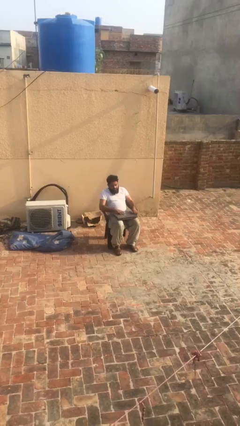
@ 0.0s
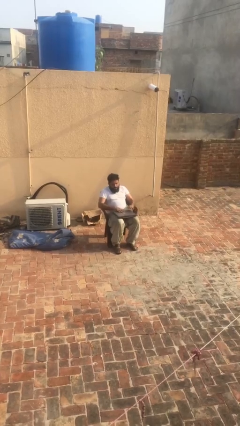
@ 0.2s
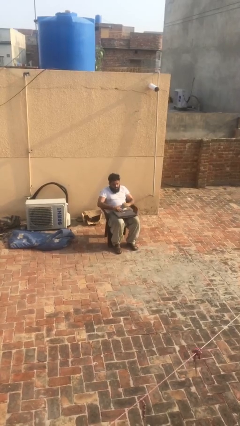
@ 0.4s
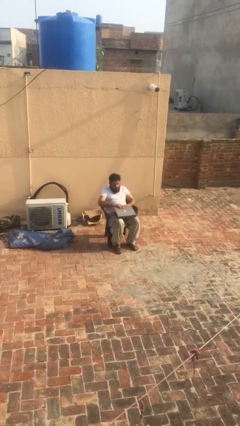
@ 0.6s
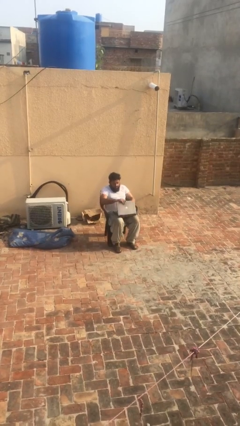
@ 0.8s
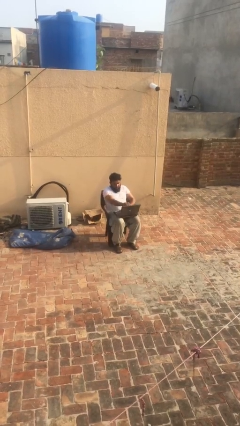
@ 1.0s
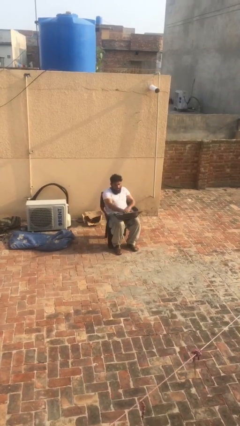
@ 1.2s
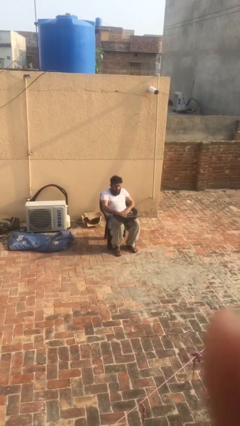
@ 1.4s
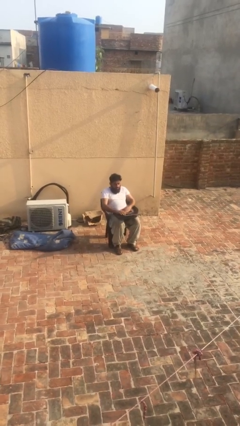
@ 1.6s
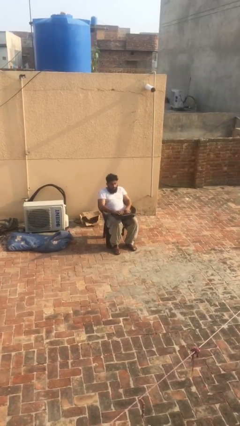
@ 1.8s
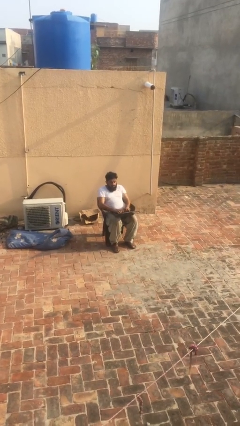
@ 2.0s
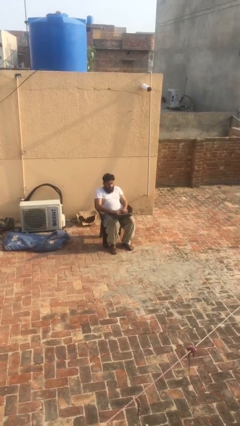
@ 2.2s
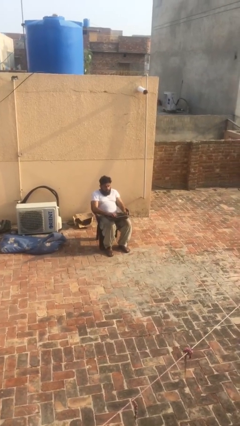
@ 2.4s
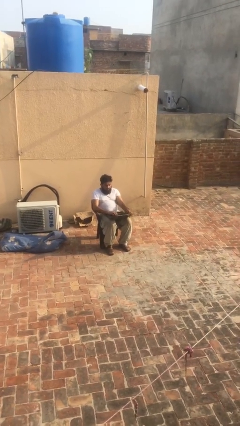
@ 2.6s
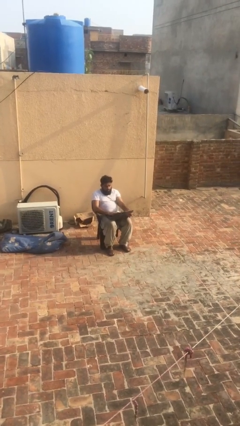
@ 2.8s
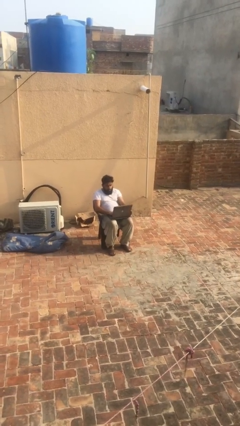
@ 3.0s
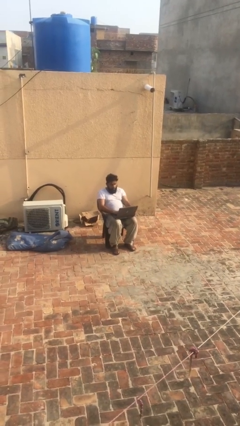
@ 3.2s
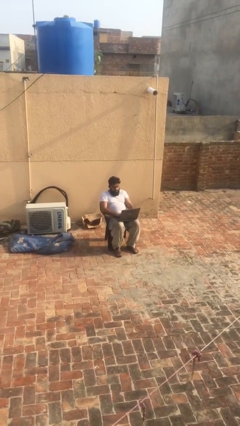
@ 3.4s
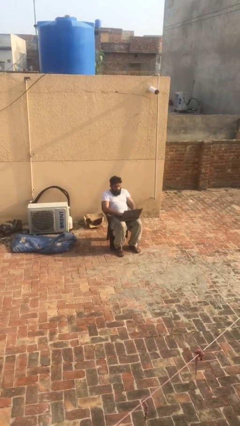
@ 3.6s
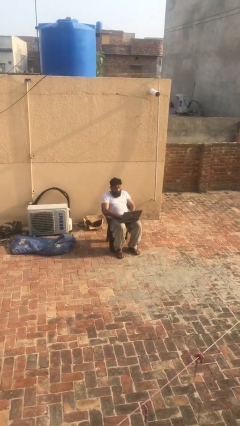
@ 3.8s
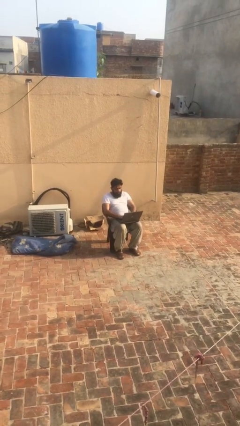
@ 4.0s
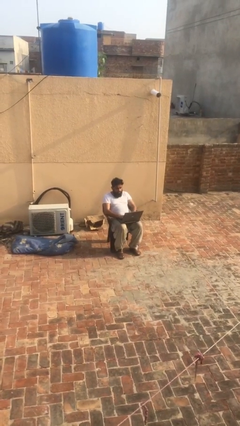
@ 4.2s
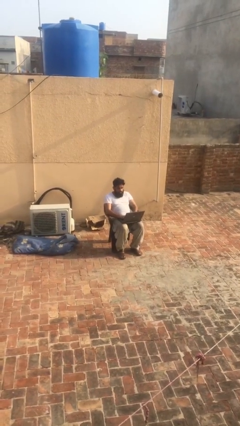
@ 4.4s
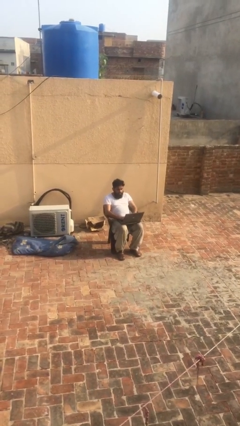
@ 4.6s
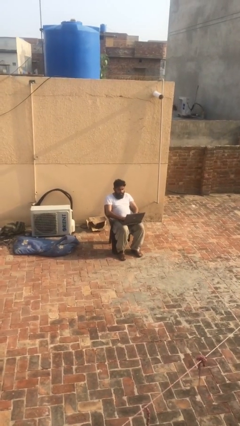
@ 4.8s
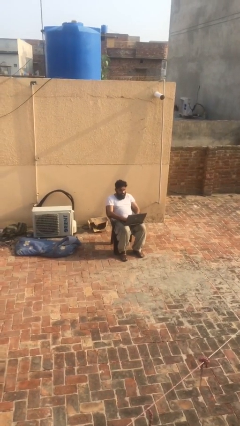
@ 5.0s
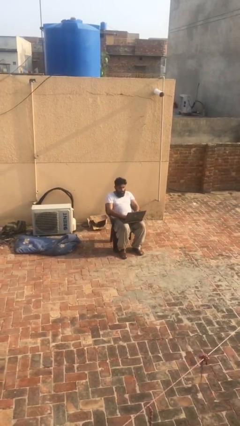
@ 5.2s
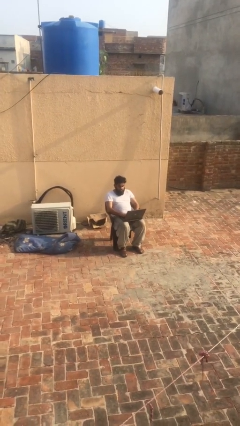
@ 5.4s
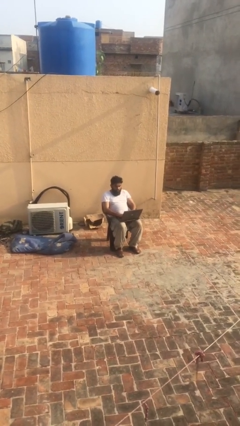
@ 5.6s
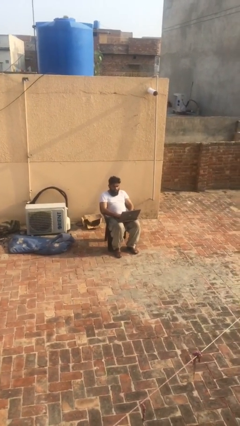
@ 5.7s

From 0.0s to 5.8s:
person interacts with laptop

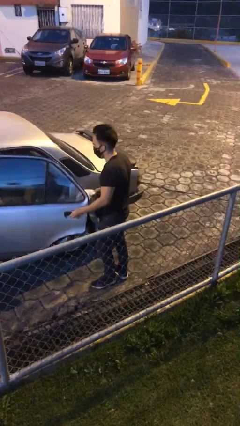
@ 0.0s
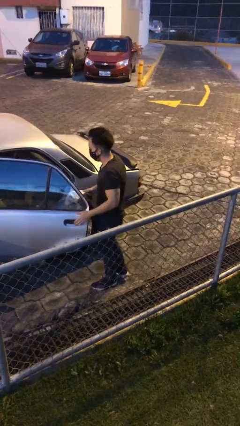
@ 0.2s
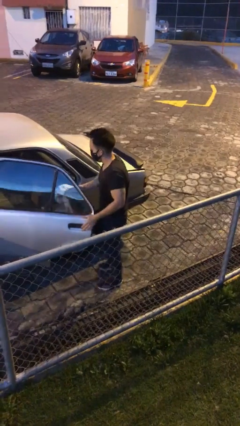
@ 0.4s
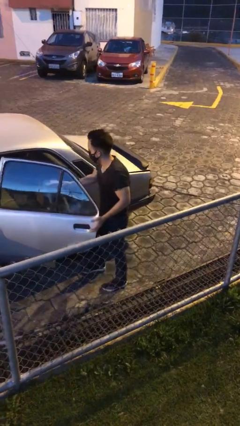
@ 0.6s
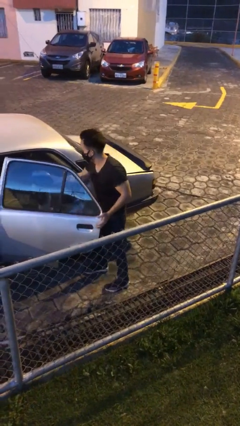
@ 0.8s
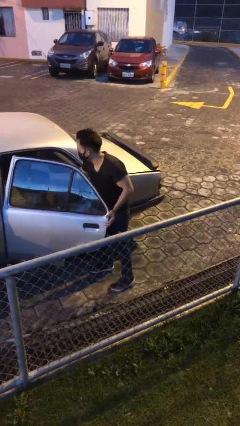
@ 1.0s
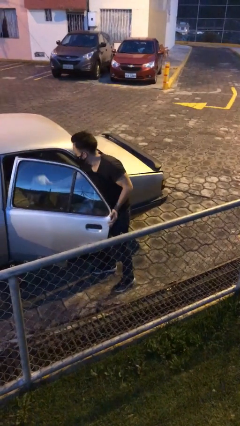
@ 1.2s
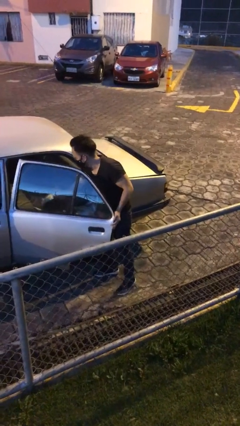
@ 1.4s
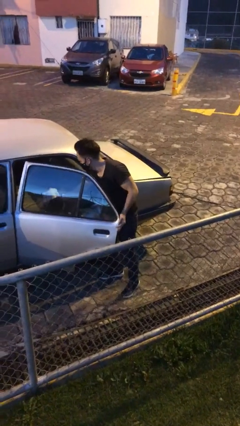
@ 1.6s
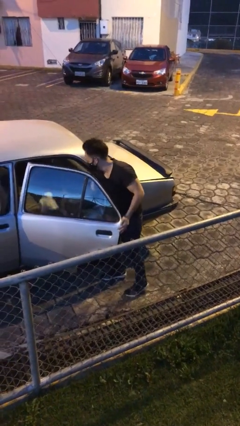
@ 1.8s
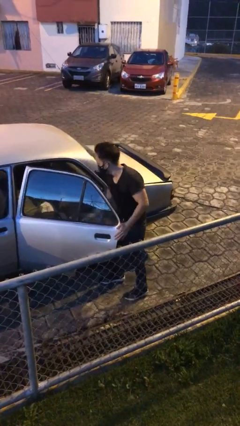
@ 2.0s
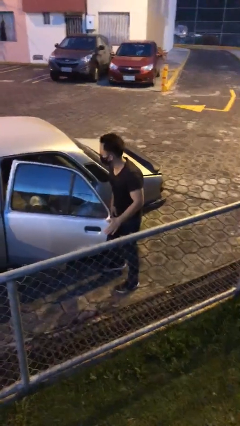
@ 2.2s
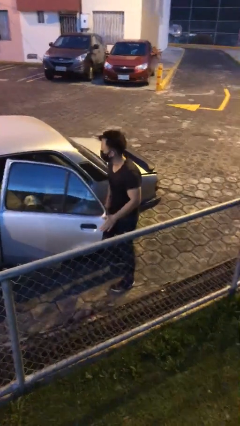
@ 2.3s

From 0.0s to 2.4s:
person unloads car

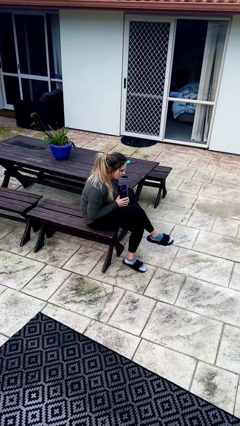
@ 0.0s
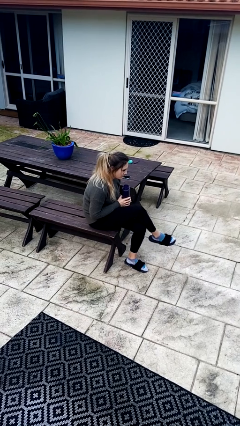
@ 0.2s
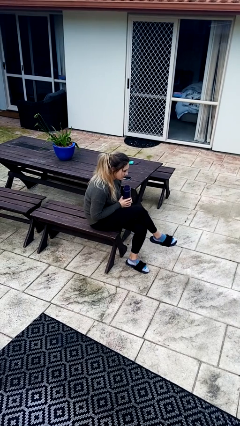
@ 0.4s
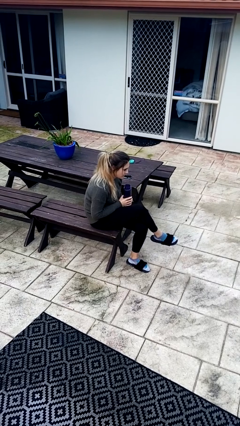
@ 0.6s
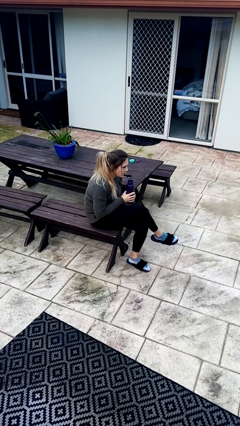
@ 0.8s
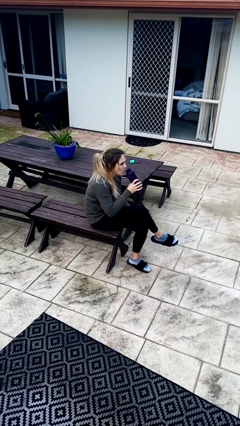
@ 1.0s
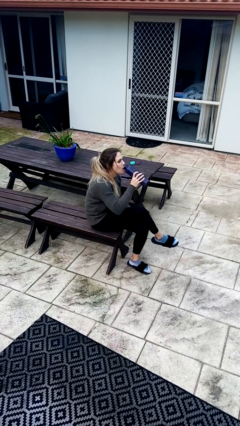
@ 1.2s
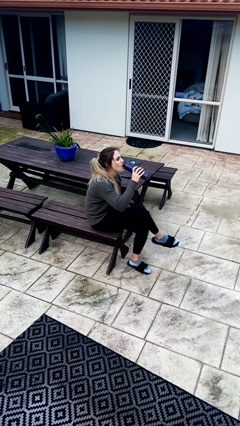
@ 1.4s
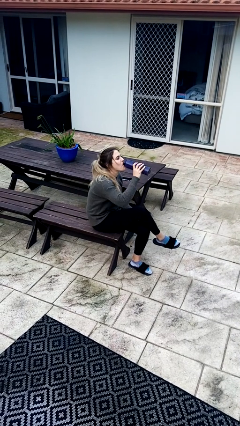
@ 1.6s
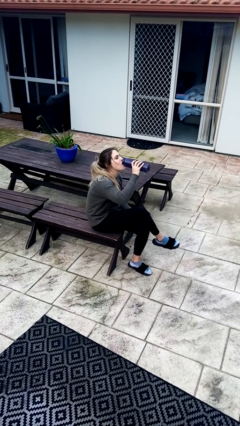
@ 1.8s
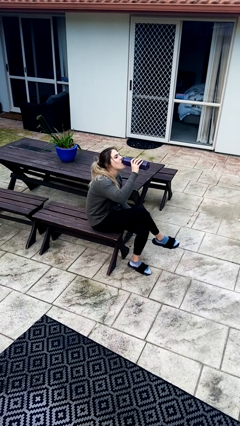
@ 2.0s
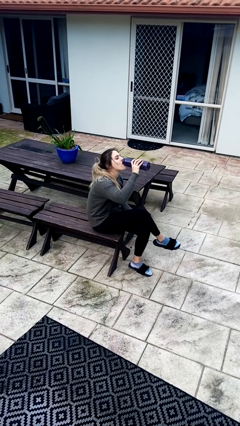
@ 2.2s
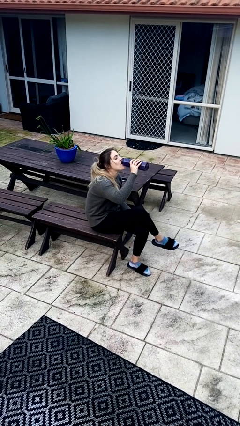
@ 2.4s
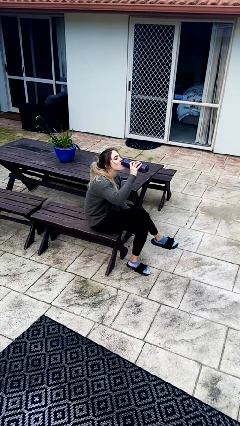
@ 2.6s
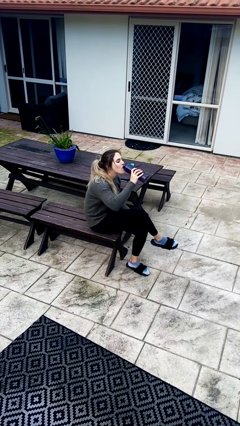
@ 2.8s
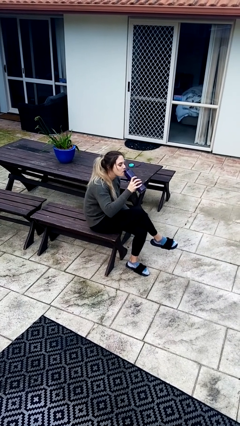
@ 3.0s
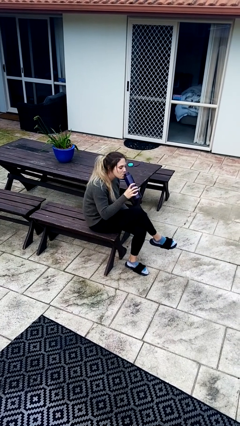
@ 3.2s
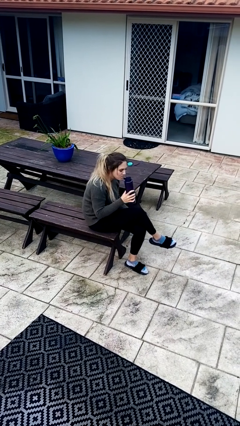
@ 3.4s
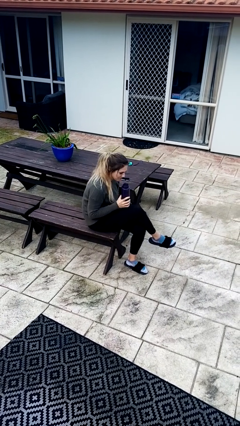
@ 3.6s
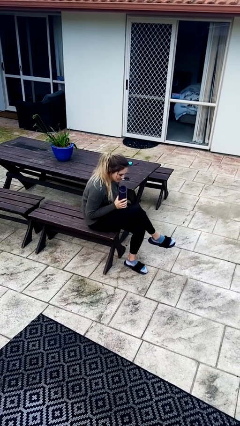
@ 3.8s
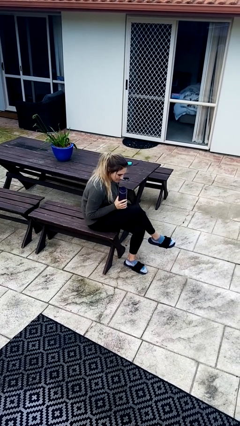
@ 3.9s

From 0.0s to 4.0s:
person drinks from bottle

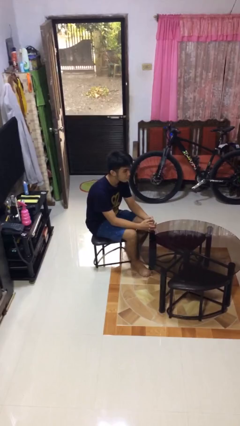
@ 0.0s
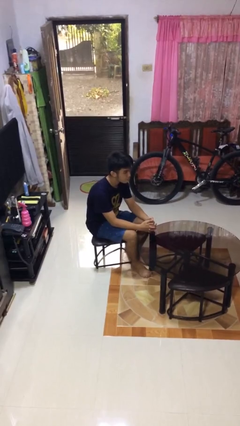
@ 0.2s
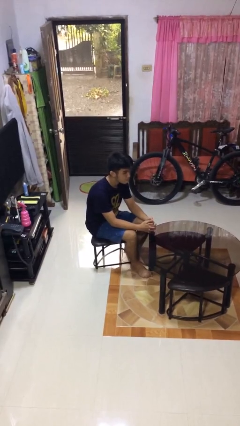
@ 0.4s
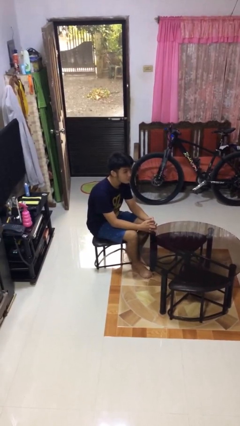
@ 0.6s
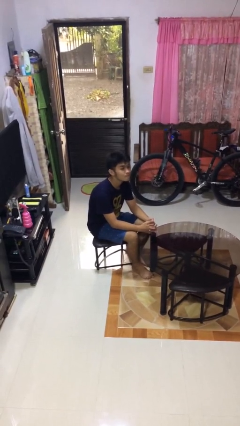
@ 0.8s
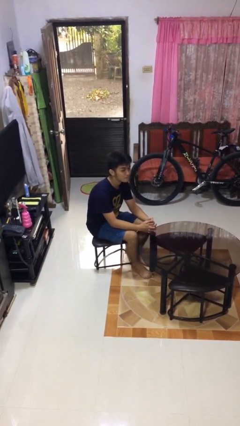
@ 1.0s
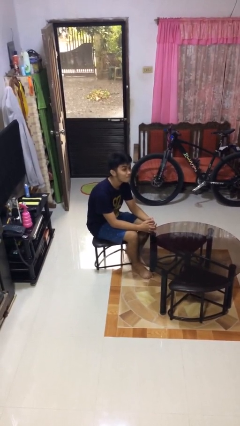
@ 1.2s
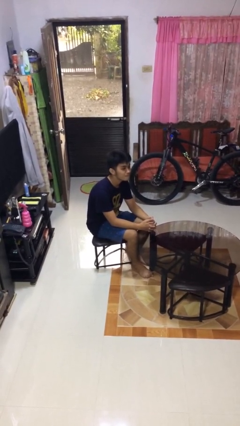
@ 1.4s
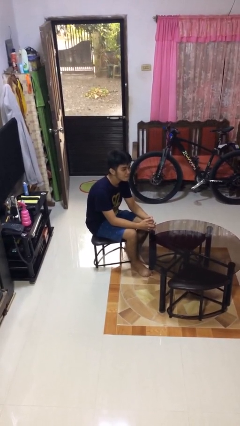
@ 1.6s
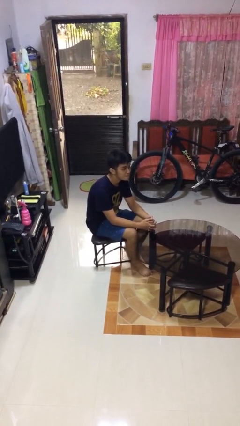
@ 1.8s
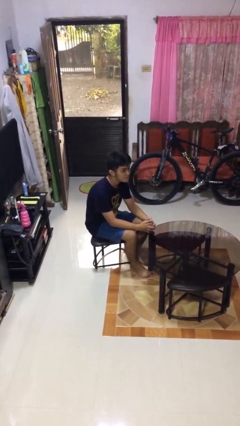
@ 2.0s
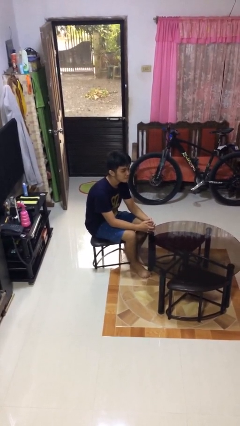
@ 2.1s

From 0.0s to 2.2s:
person nods head

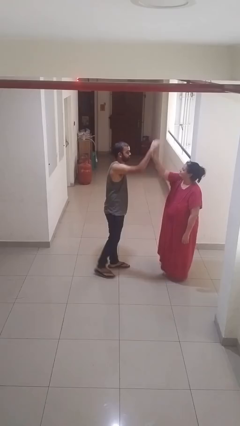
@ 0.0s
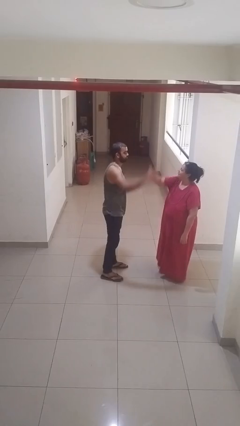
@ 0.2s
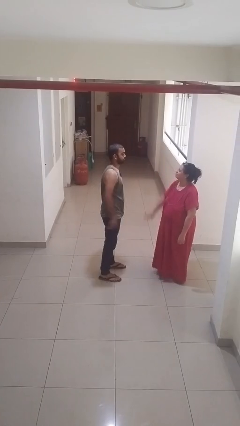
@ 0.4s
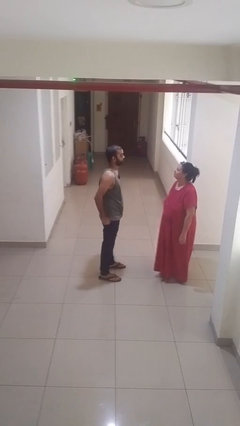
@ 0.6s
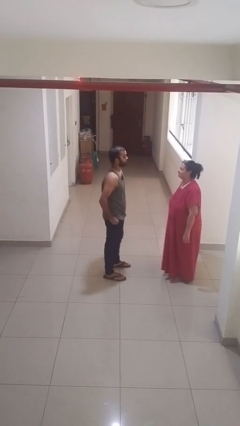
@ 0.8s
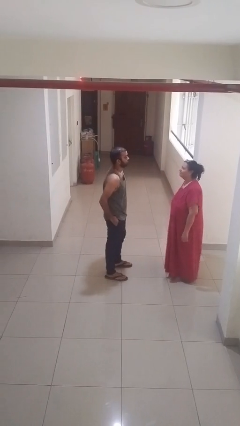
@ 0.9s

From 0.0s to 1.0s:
person highfives hand

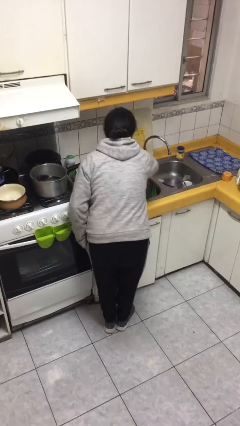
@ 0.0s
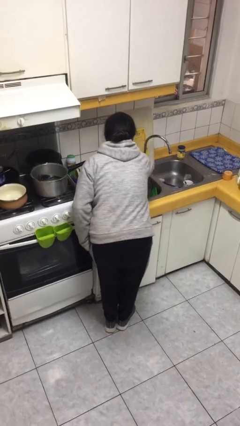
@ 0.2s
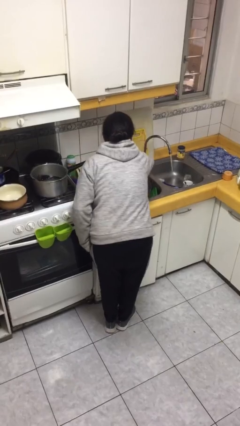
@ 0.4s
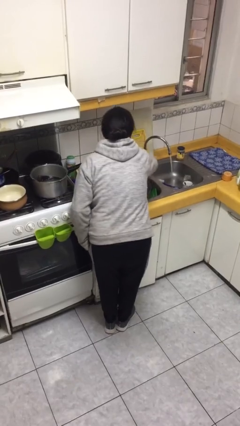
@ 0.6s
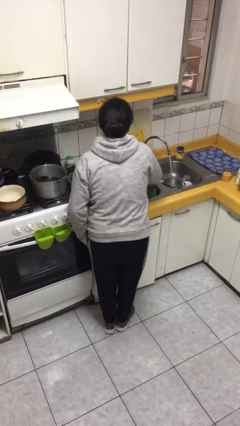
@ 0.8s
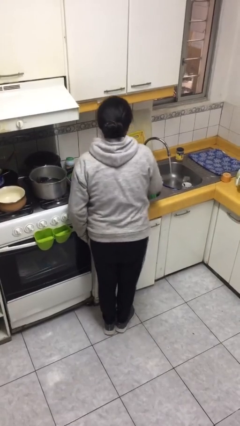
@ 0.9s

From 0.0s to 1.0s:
person turns on faucet

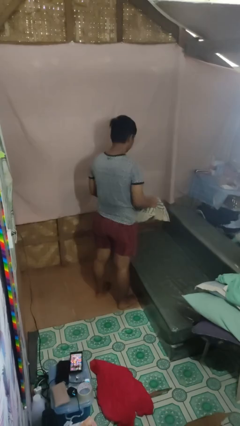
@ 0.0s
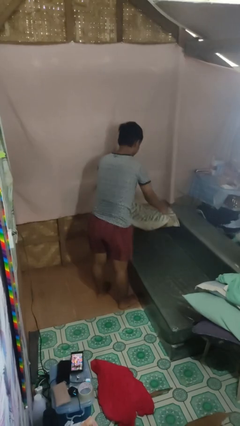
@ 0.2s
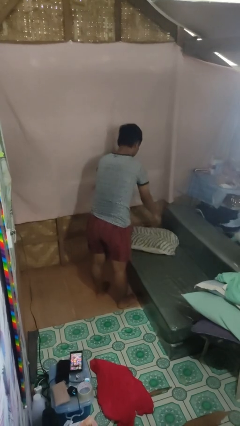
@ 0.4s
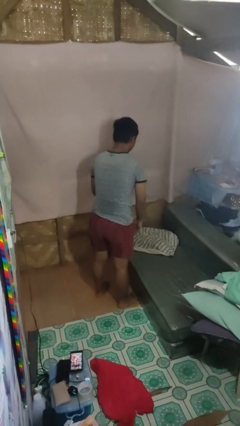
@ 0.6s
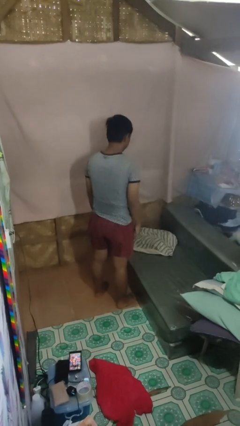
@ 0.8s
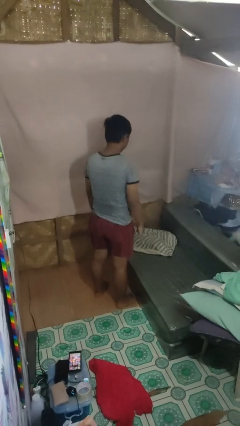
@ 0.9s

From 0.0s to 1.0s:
person puts down object on couch
